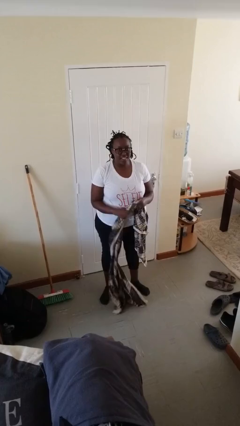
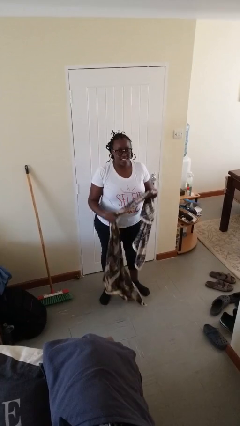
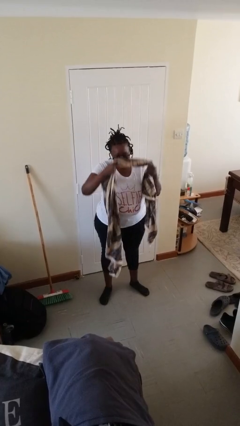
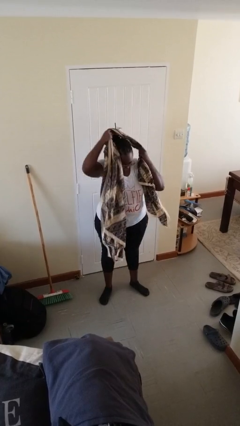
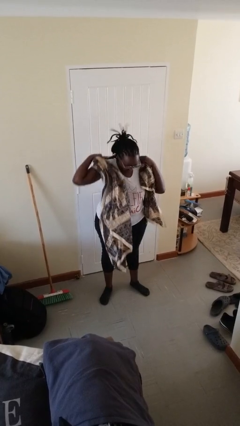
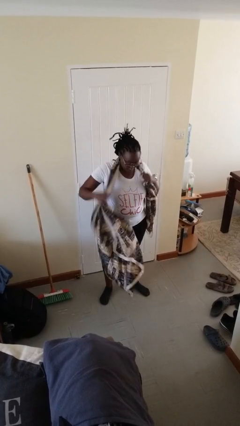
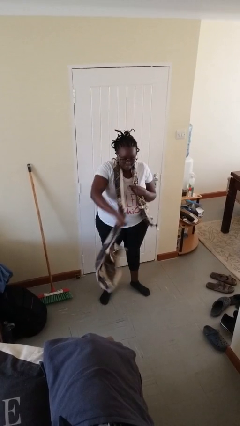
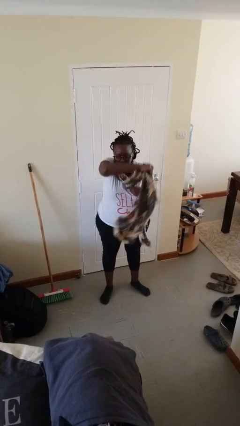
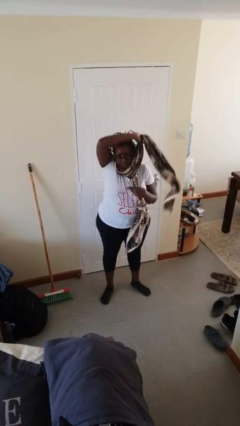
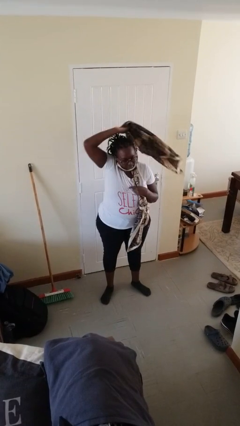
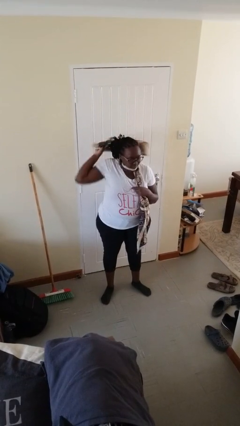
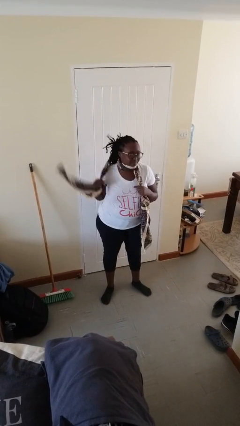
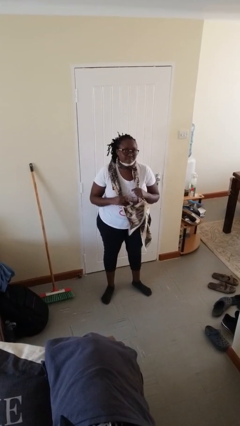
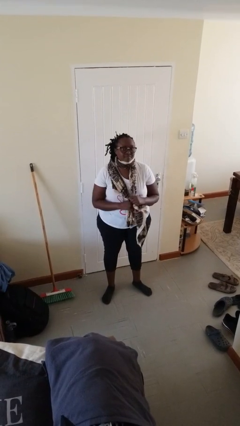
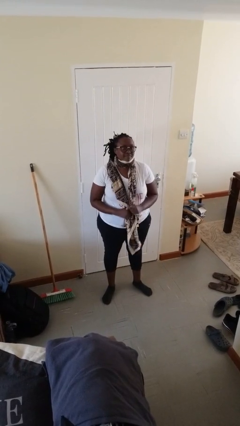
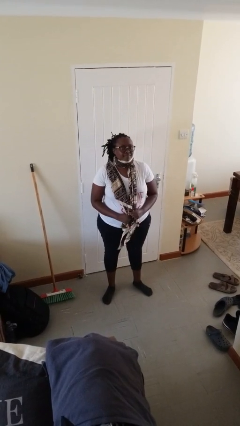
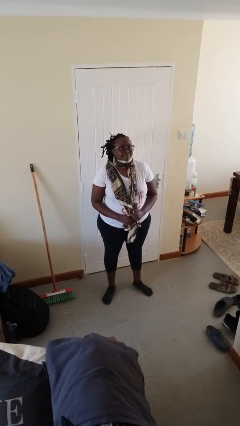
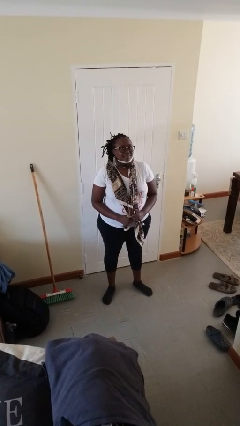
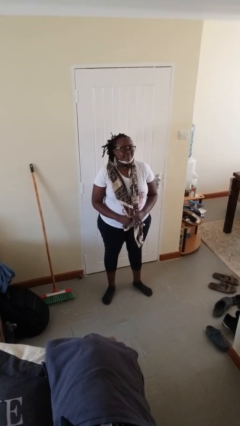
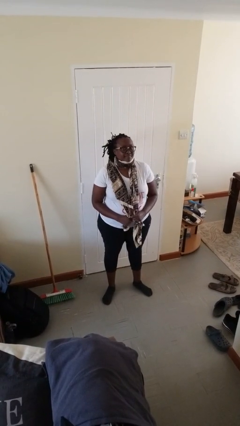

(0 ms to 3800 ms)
person puts on scarf

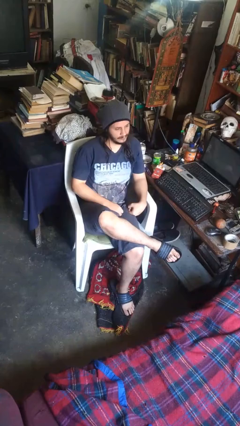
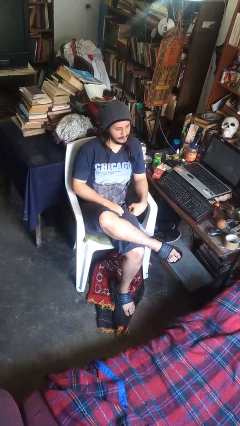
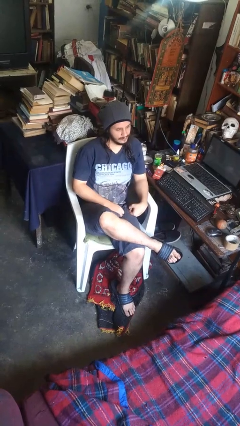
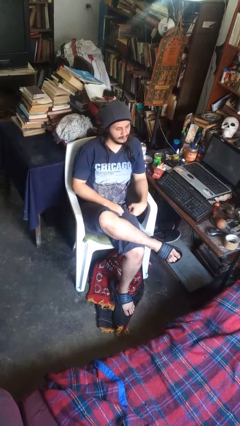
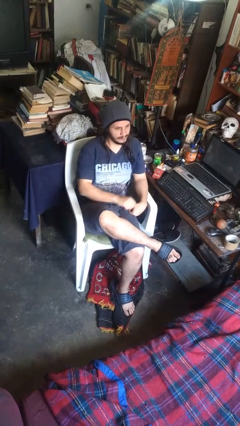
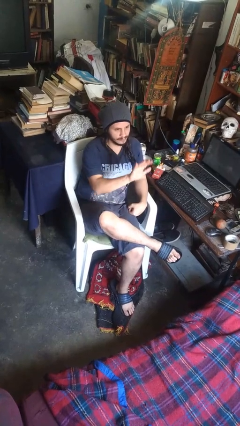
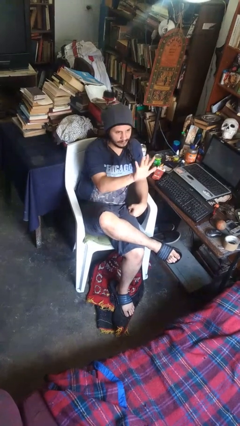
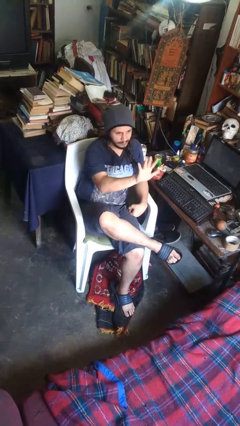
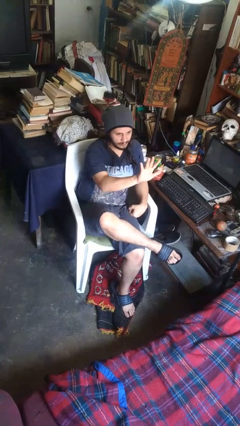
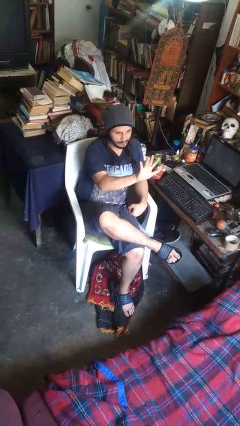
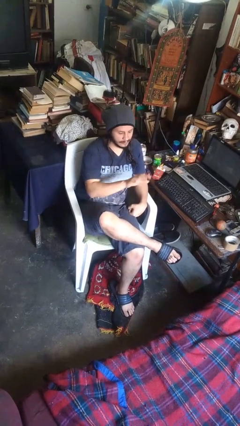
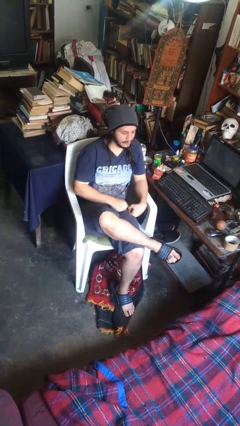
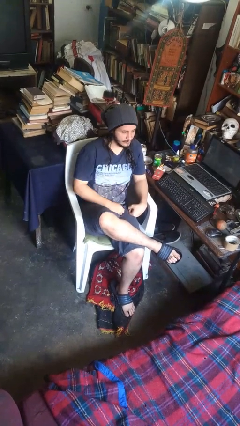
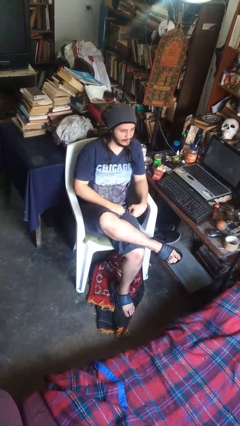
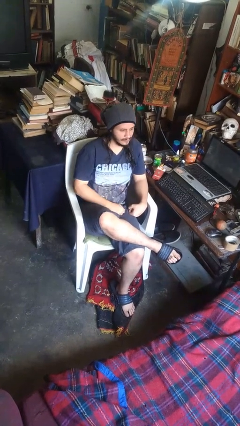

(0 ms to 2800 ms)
person gestures number five

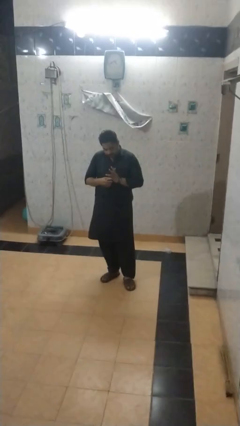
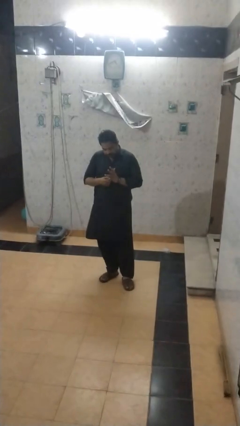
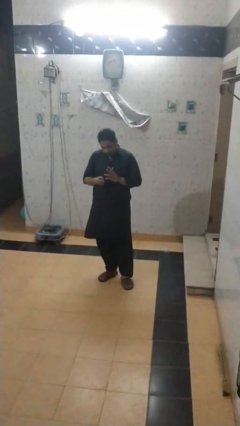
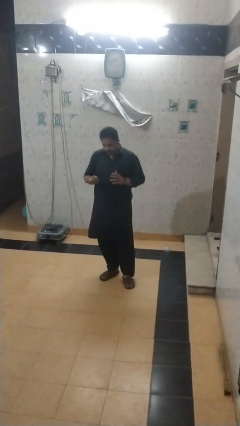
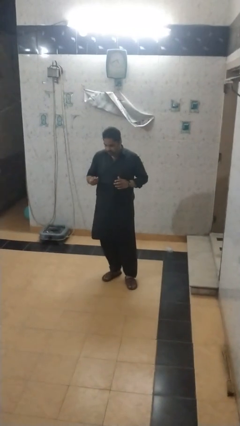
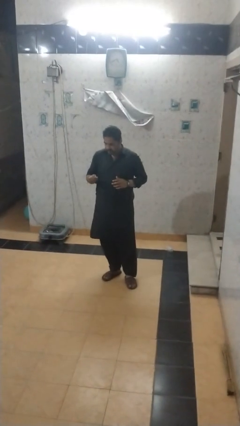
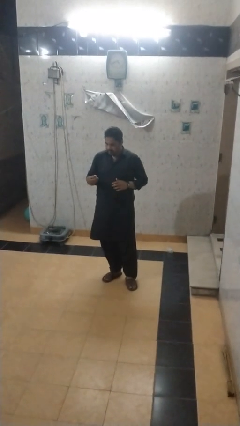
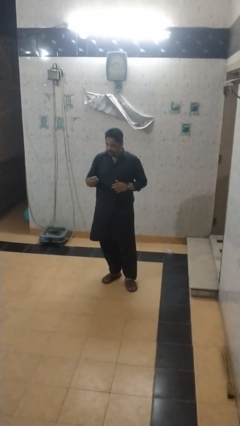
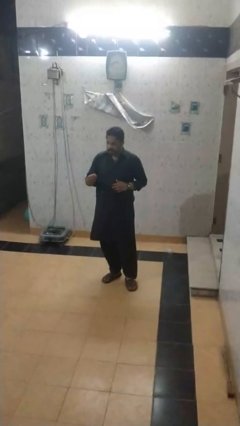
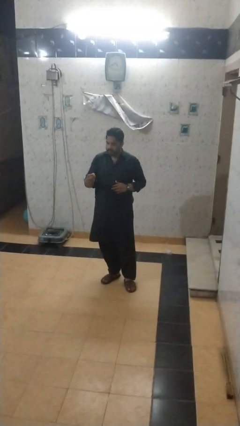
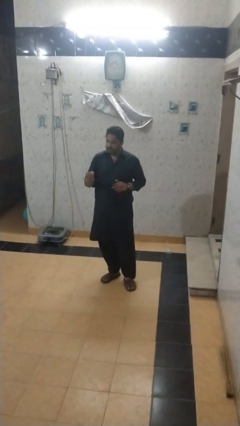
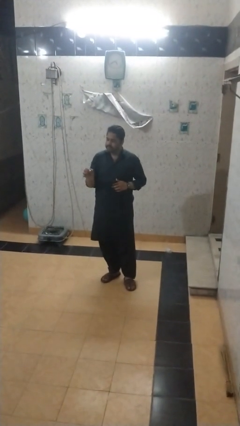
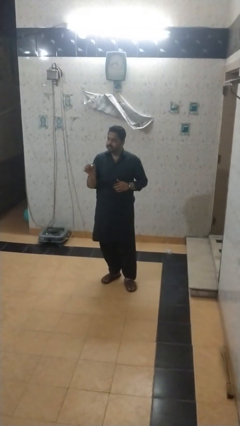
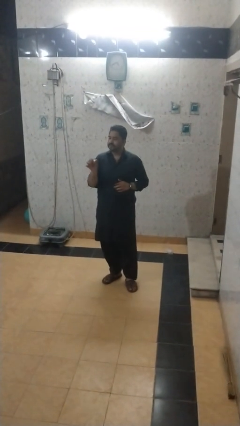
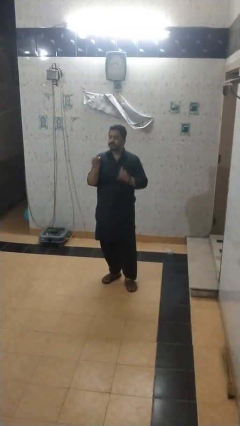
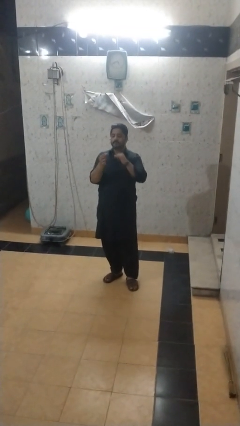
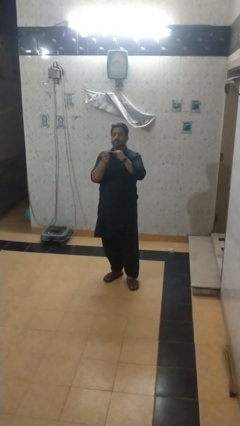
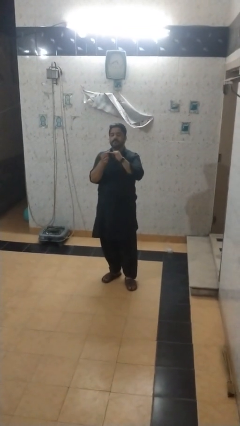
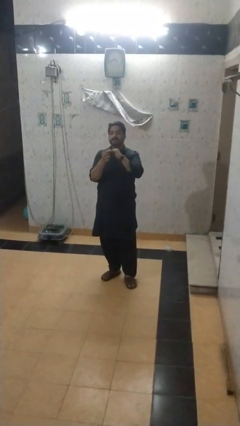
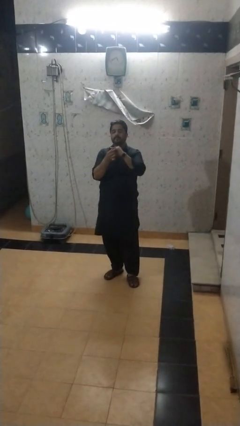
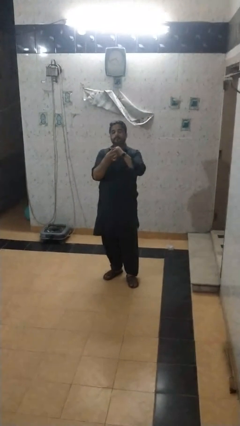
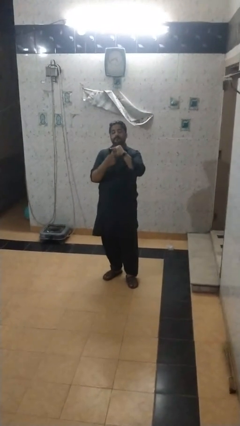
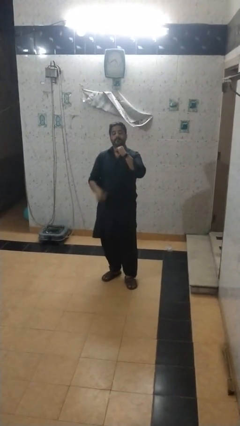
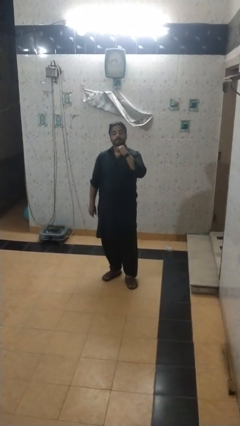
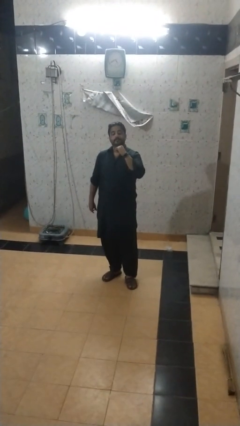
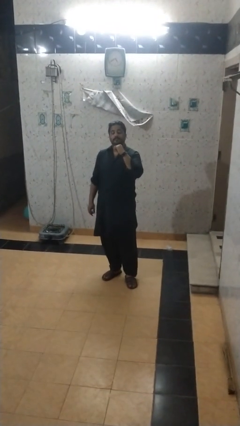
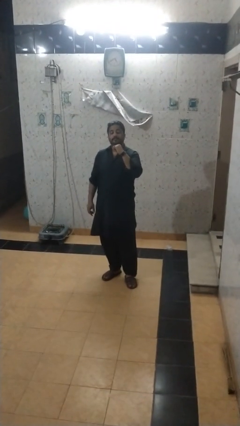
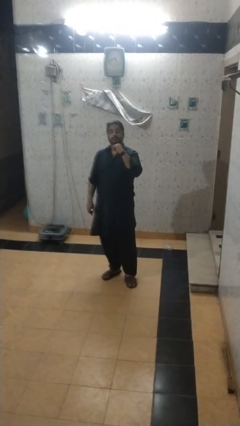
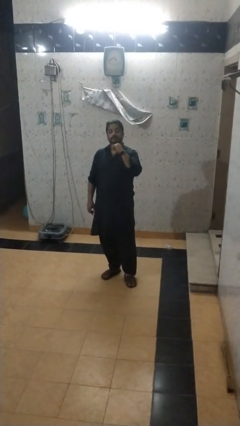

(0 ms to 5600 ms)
person puts on ring

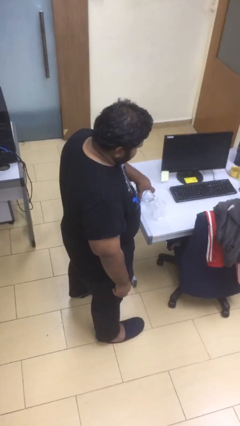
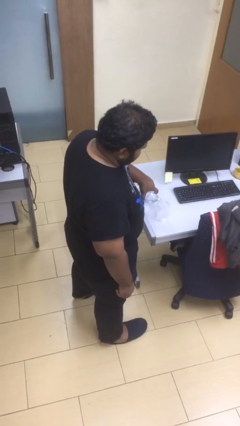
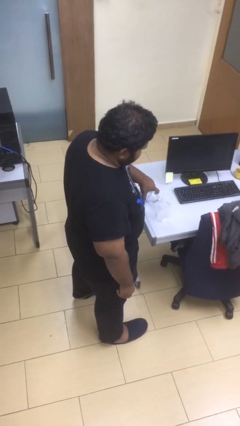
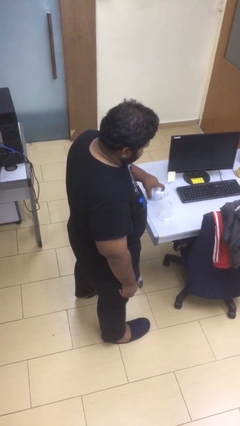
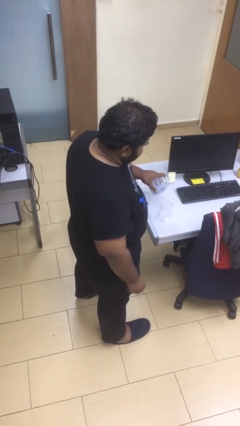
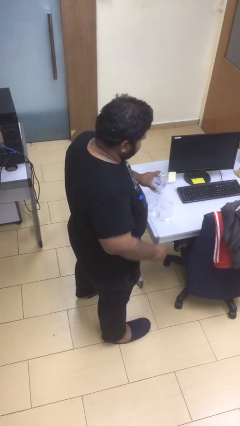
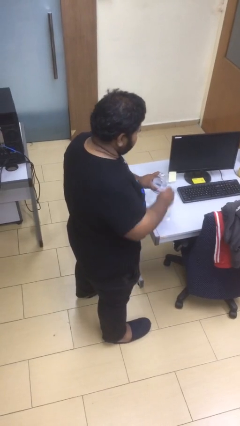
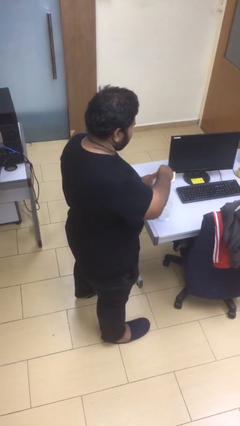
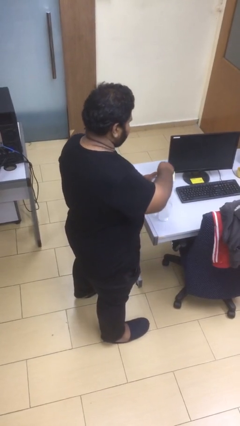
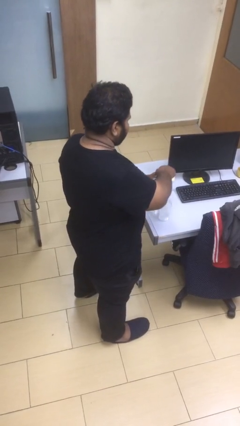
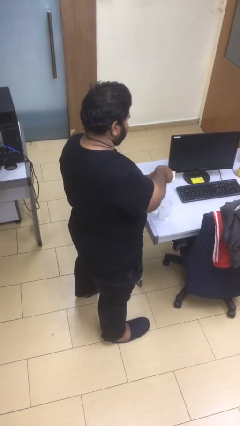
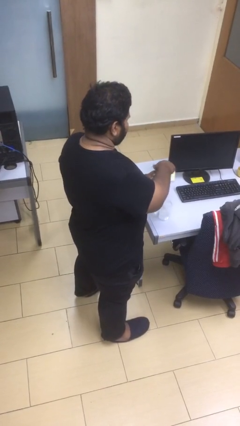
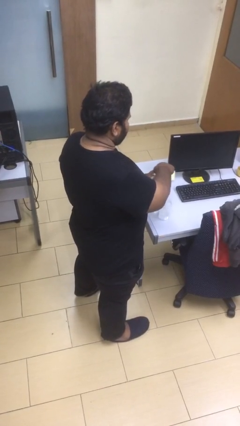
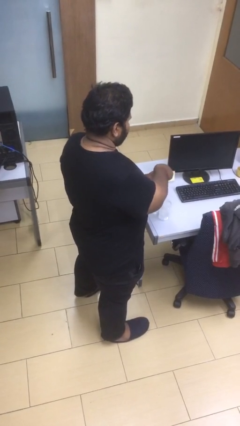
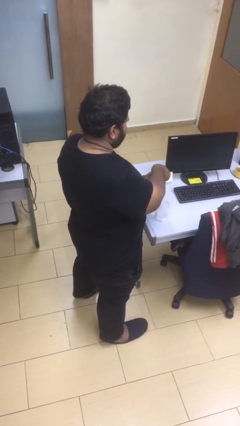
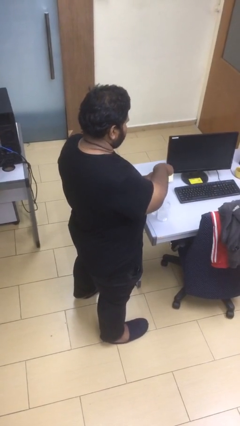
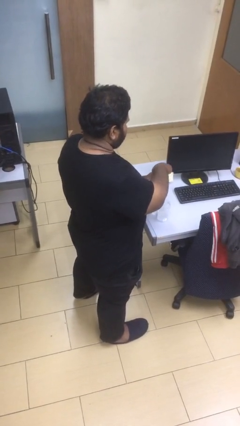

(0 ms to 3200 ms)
person screws lid to bottle

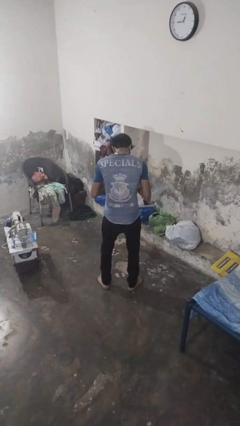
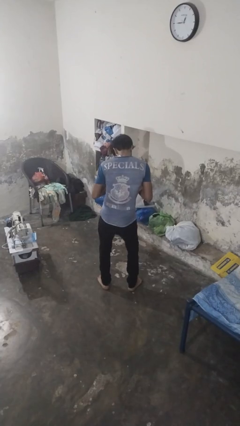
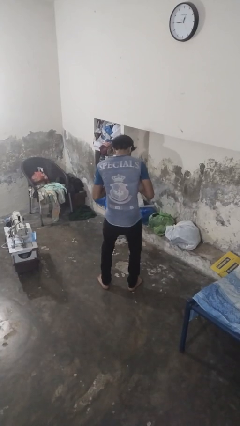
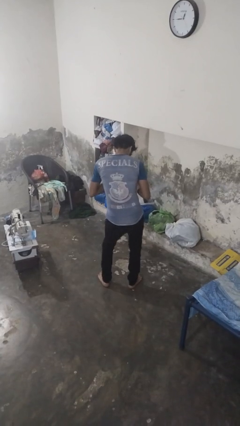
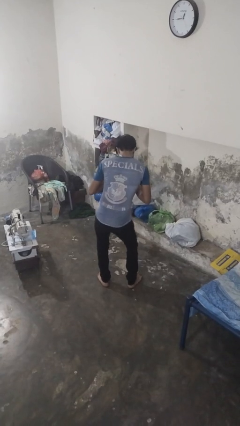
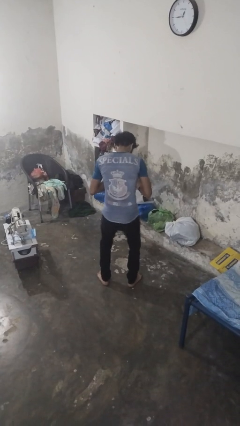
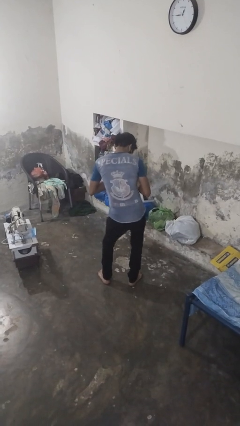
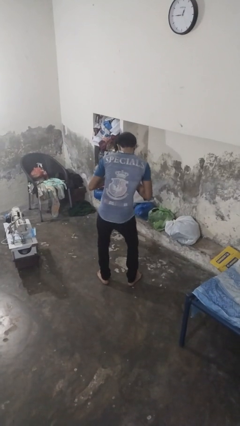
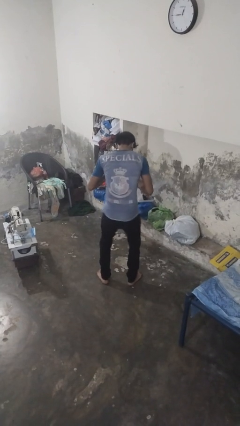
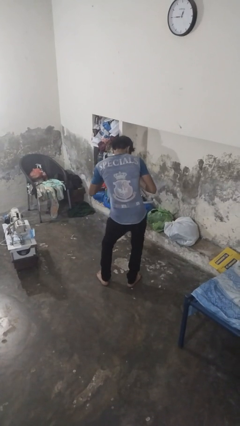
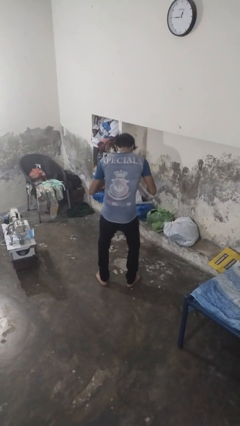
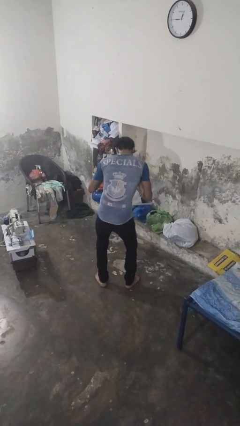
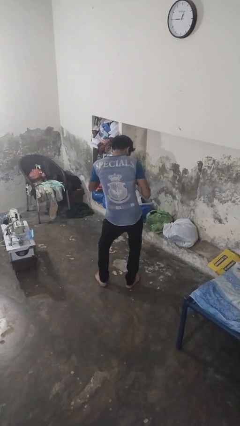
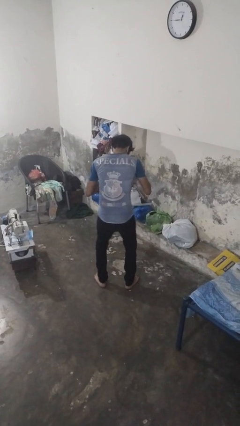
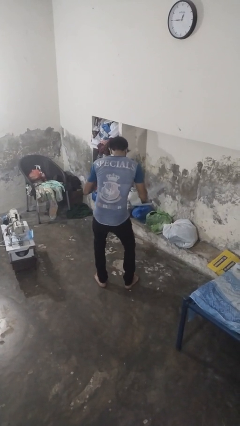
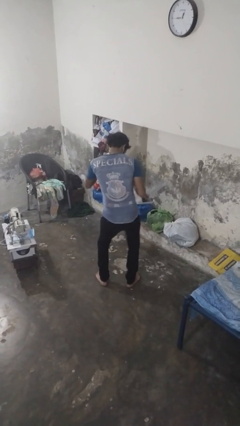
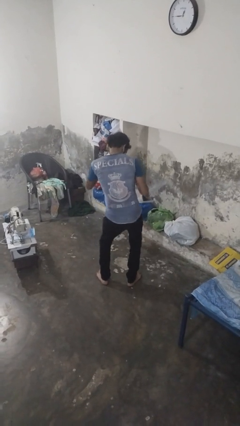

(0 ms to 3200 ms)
person wiggles hips
